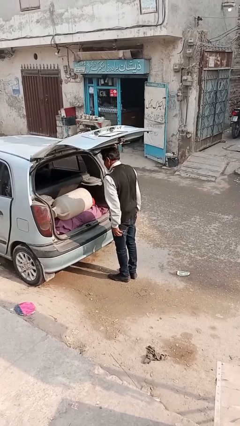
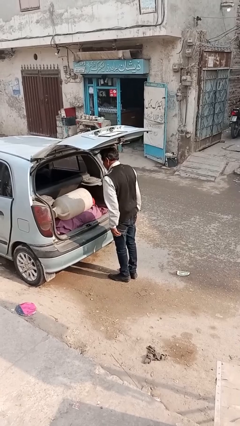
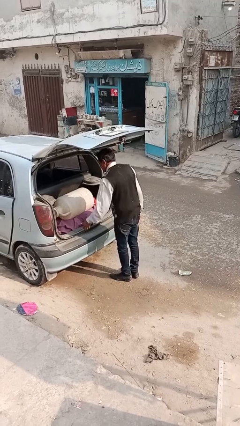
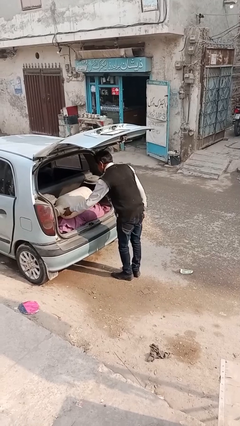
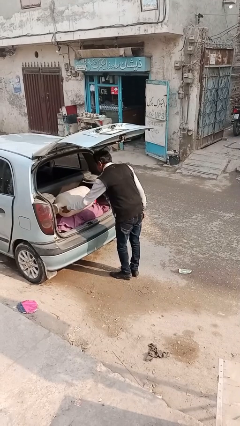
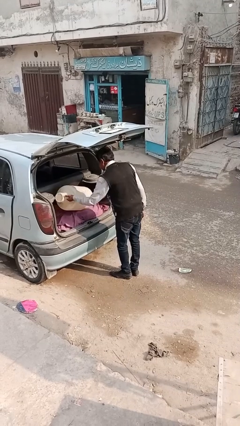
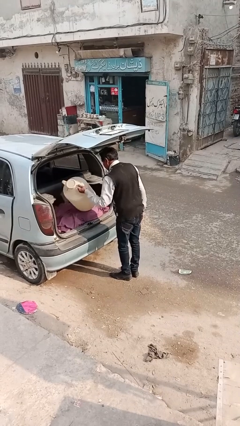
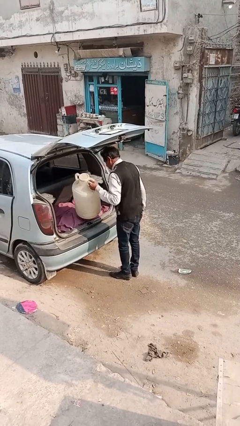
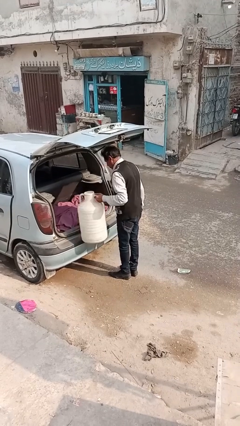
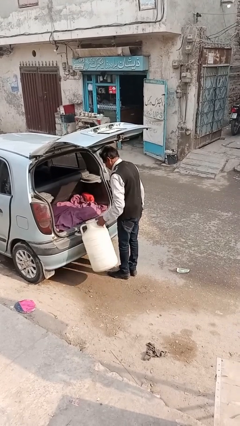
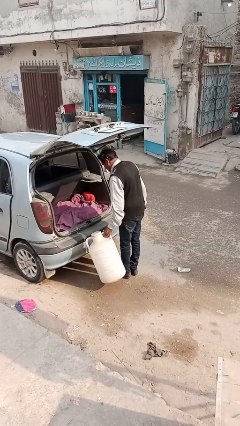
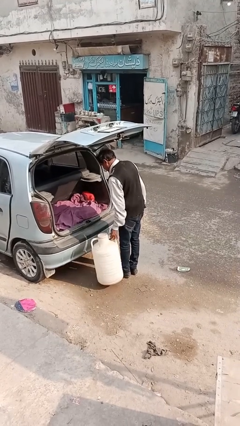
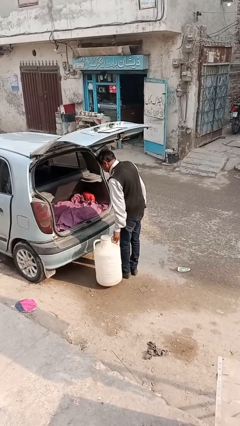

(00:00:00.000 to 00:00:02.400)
person unloads car

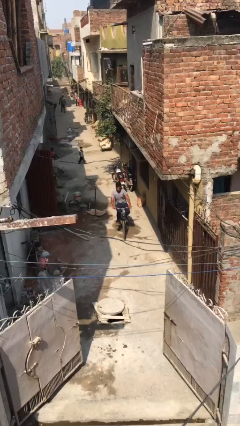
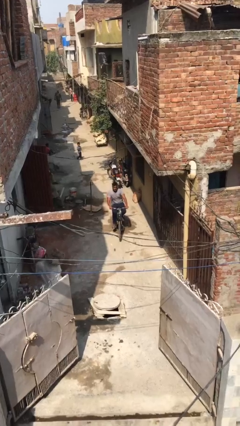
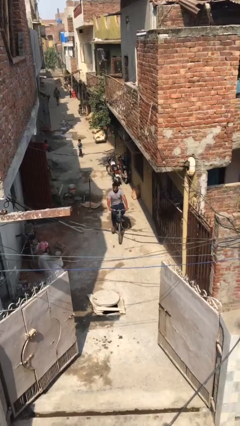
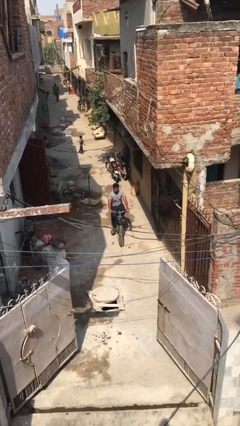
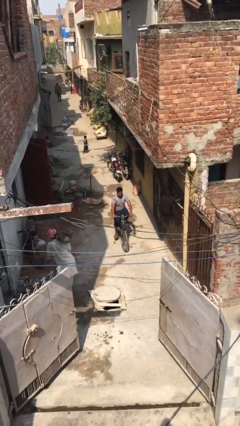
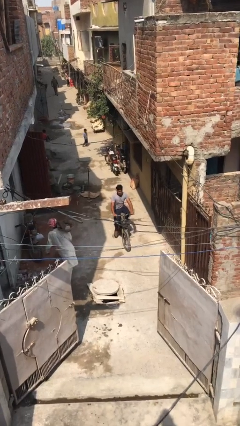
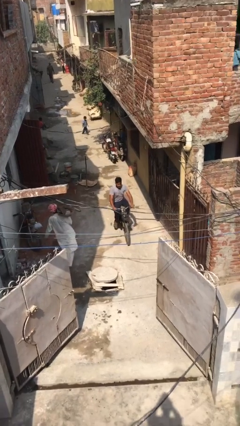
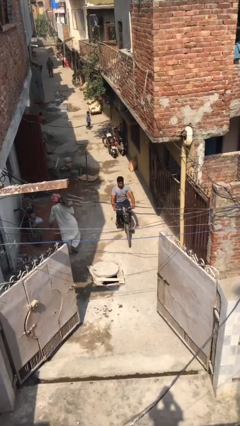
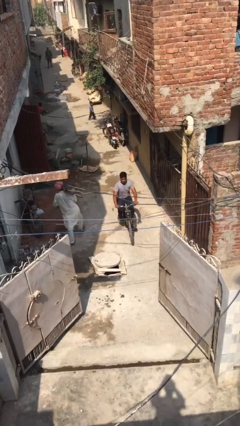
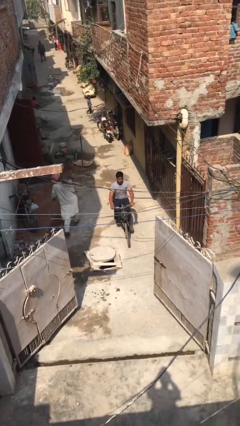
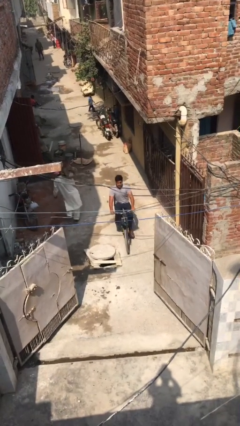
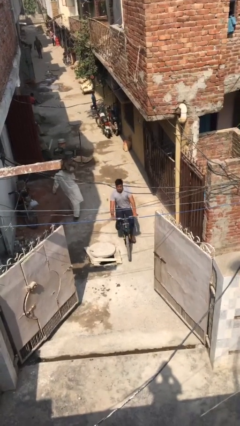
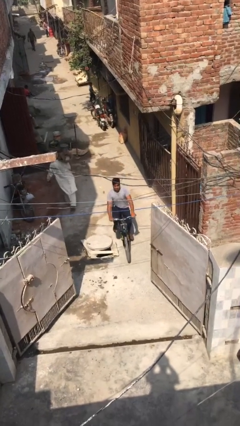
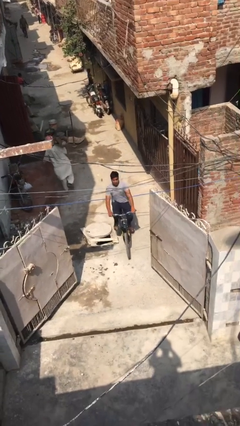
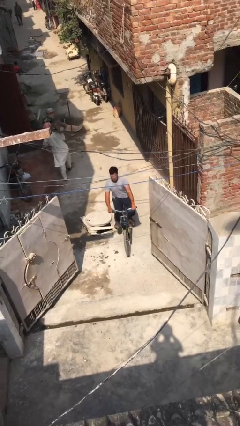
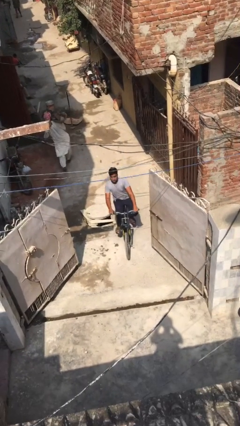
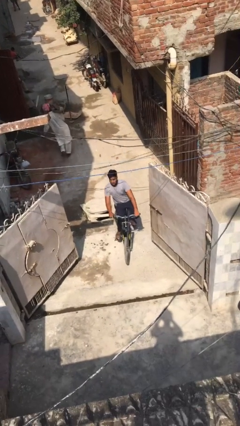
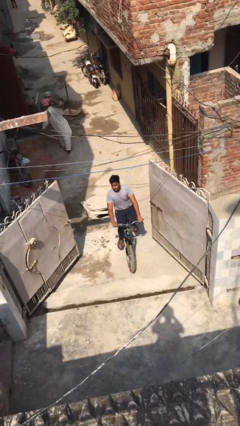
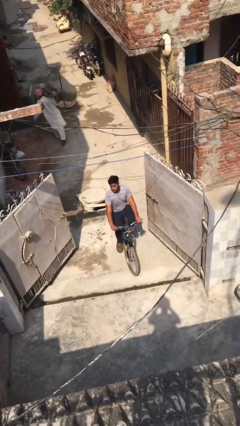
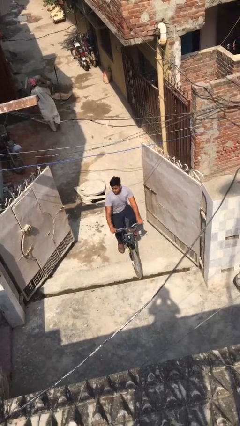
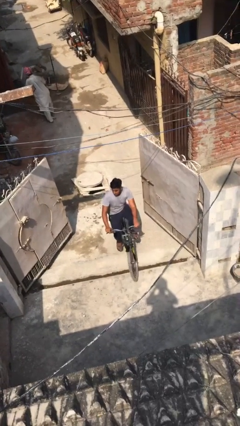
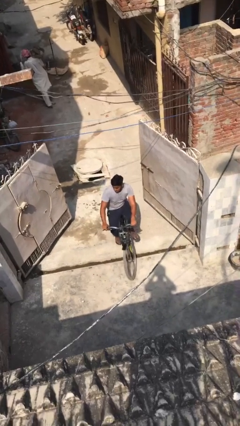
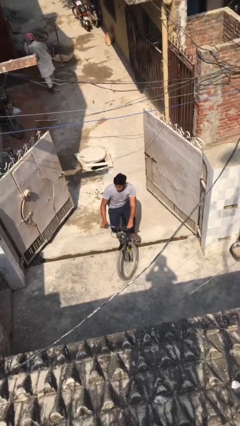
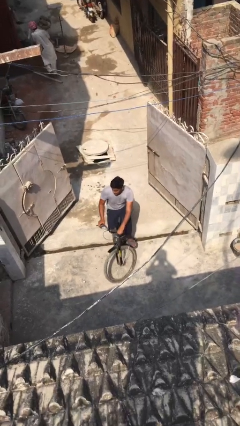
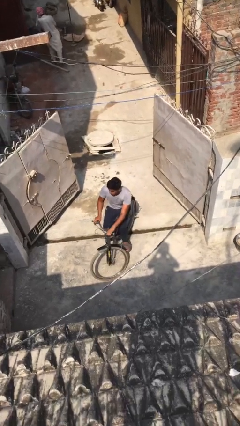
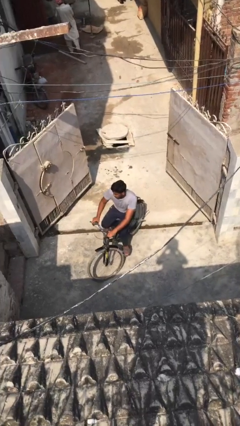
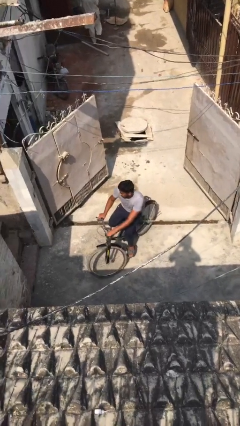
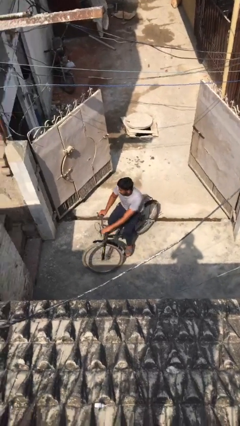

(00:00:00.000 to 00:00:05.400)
person rides bicycle

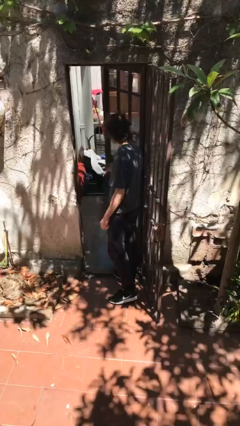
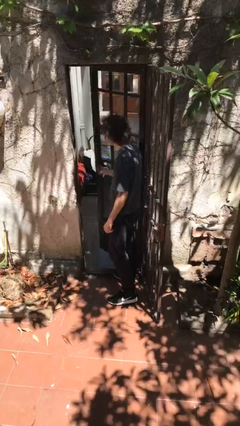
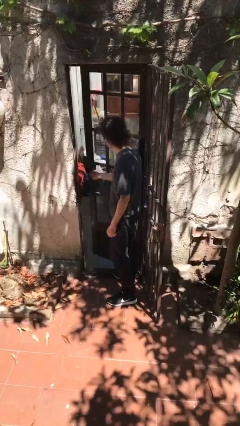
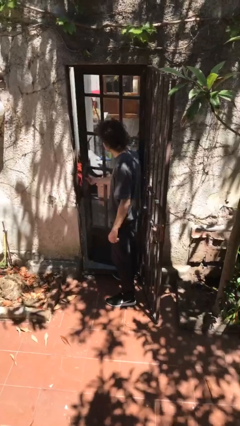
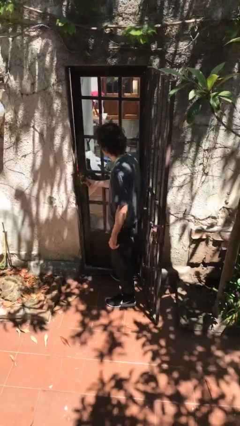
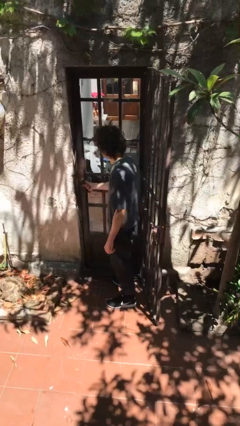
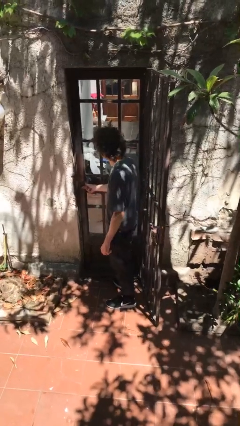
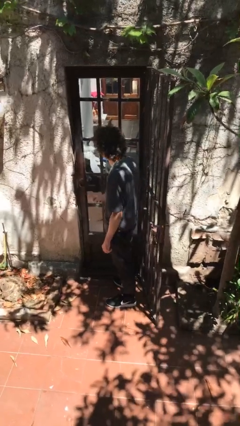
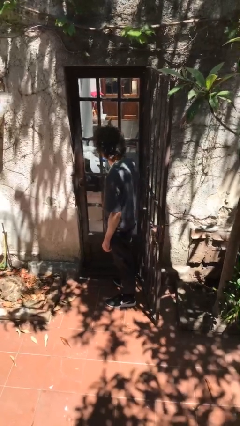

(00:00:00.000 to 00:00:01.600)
person closes facility door

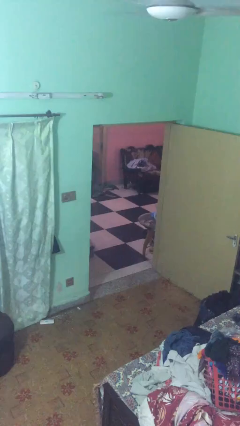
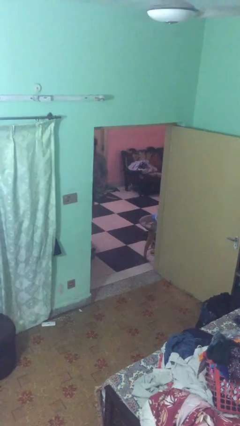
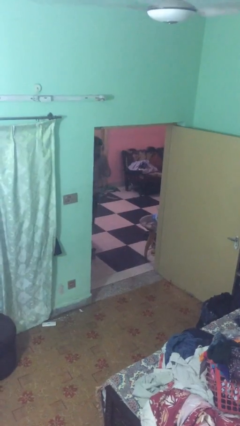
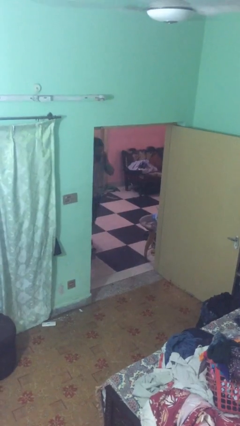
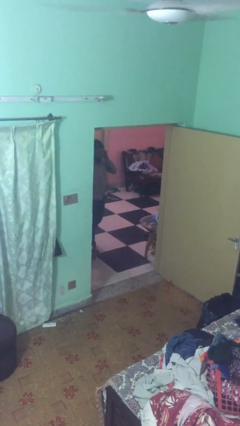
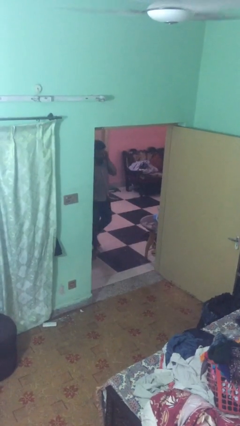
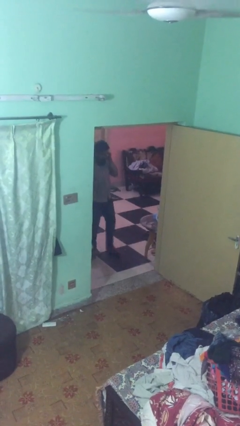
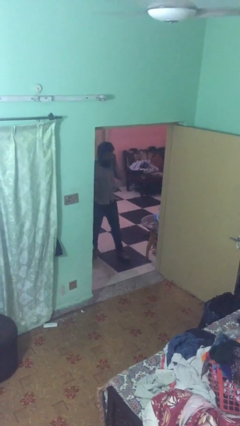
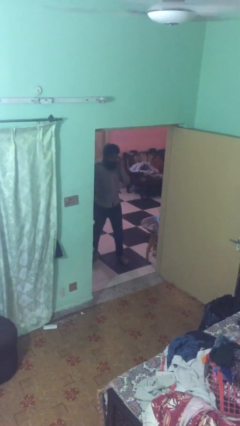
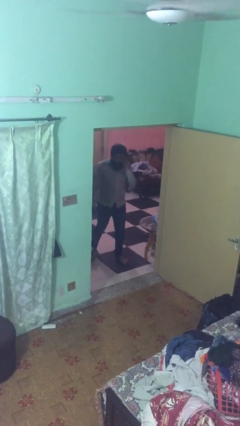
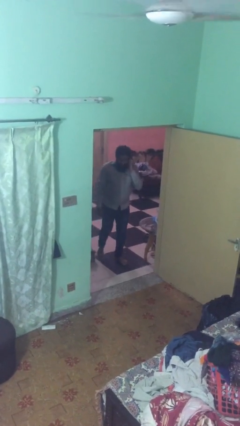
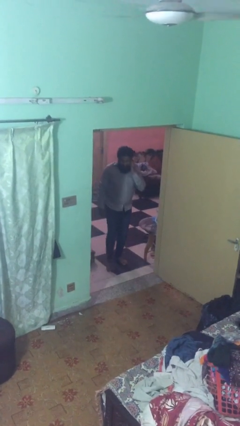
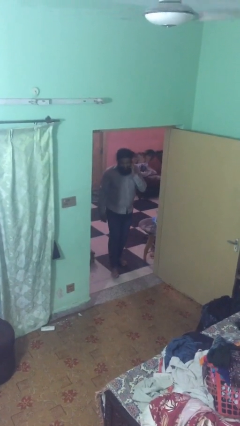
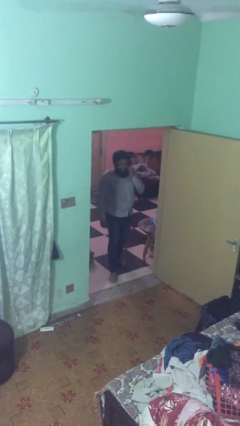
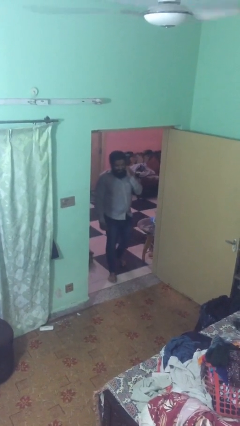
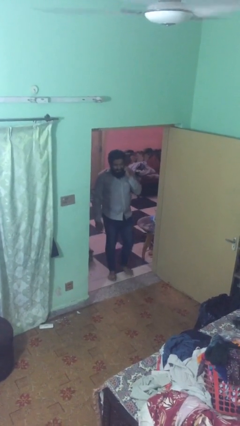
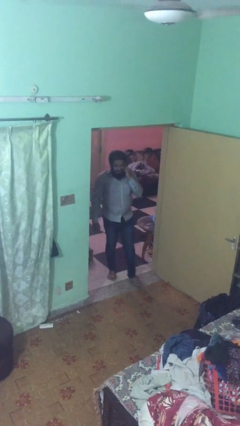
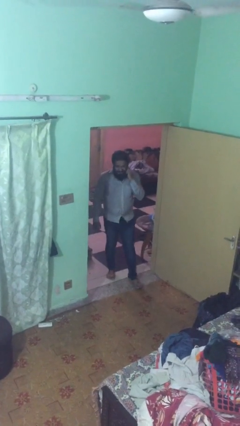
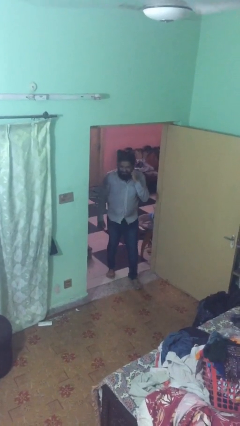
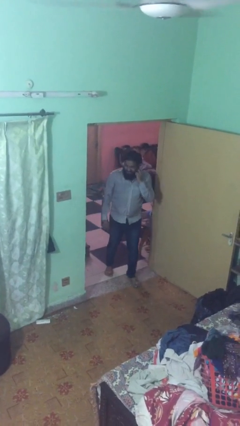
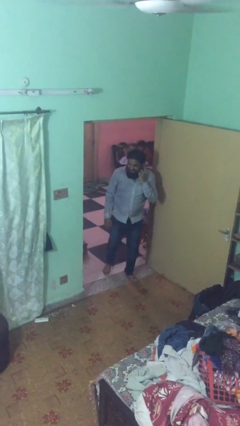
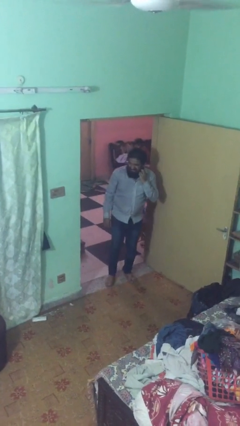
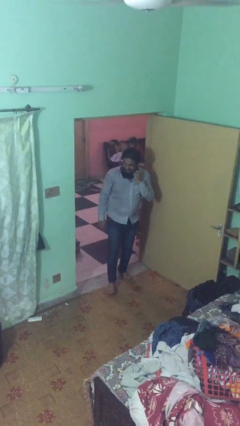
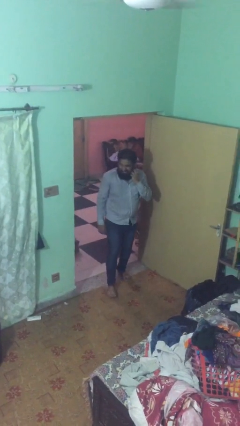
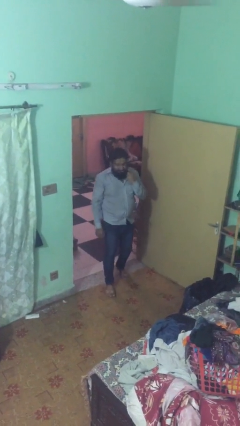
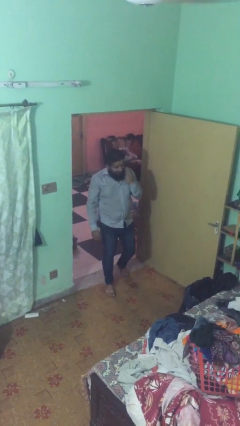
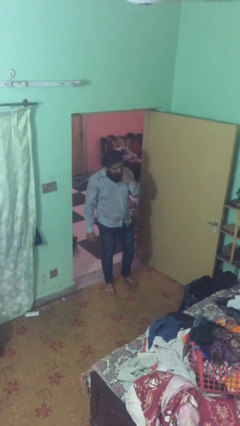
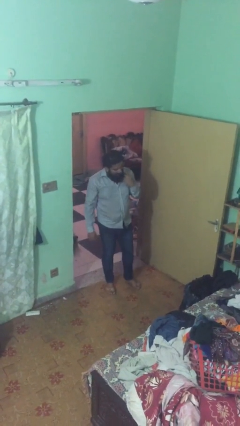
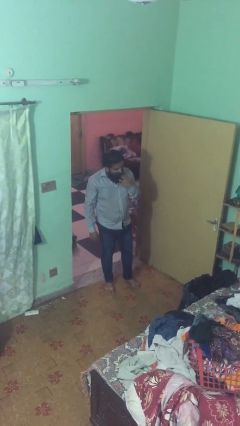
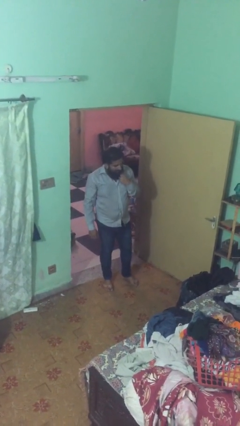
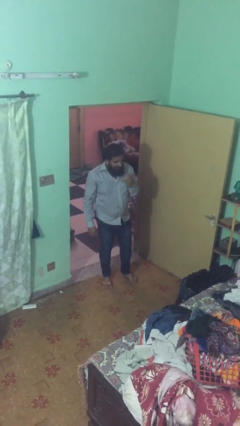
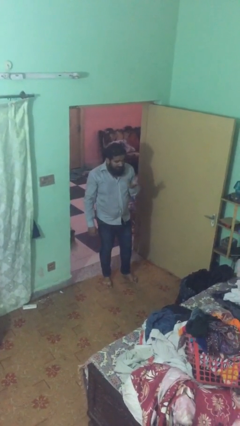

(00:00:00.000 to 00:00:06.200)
person enters scene through structure

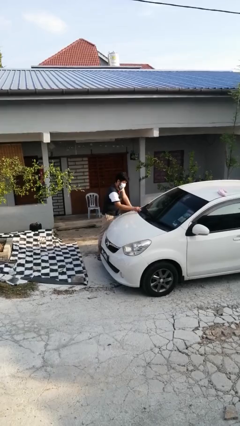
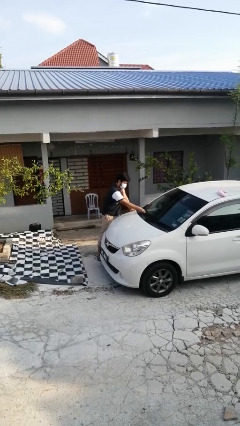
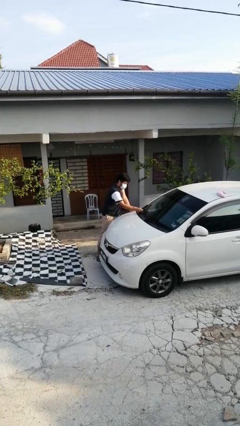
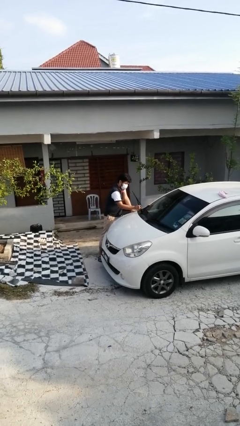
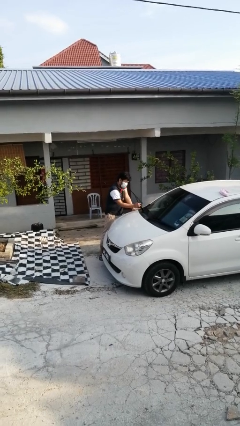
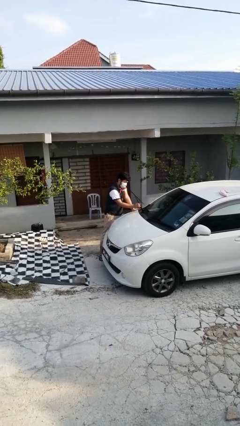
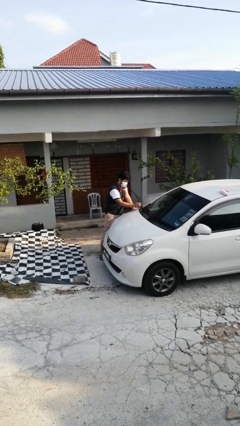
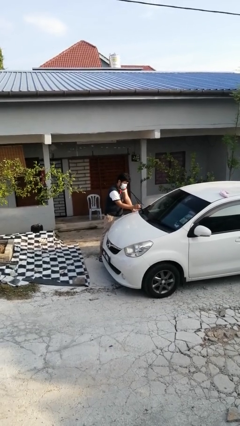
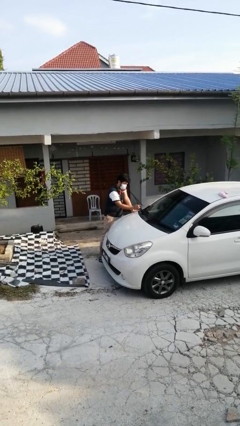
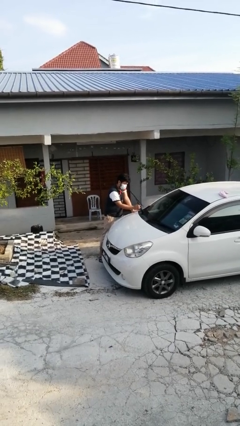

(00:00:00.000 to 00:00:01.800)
person flips up car wipers
